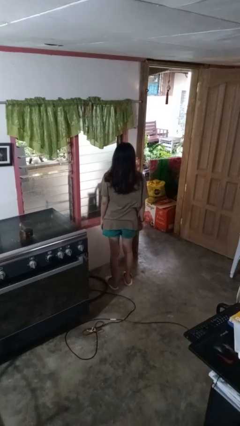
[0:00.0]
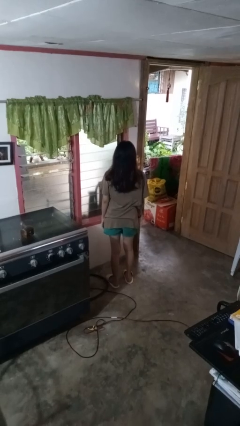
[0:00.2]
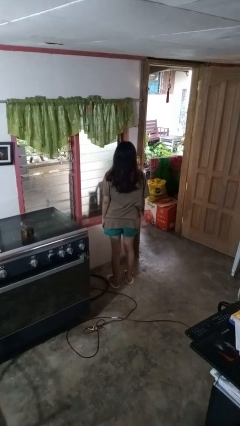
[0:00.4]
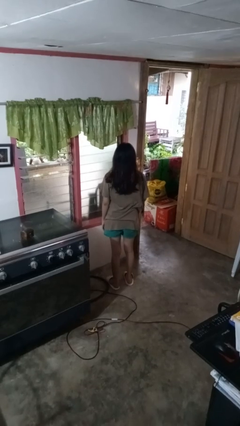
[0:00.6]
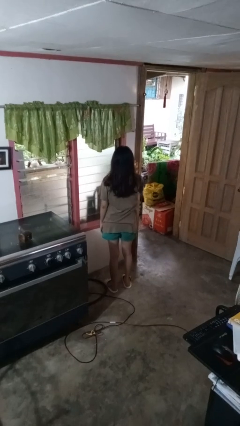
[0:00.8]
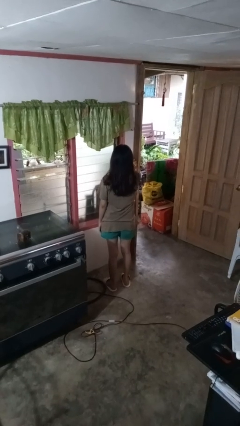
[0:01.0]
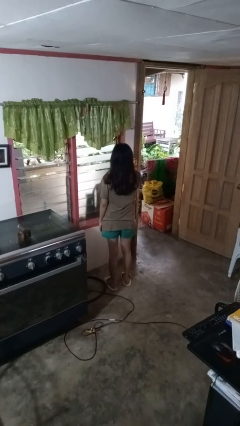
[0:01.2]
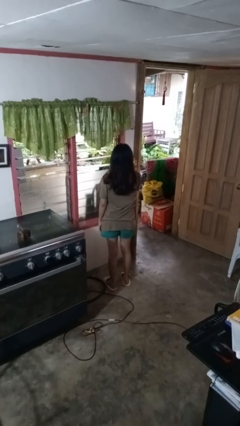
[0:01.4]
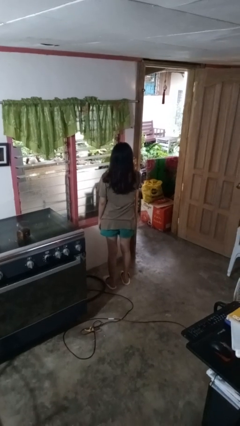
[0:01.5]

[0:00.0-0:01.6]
person opens home window

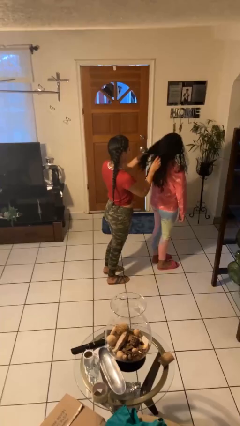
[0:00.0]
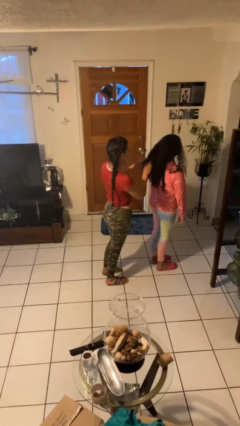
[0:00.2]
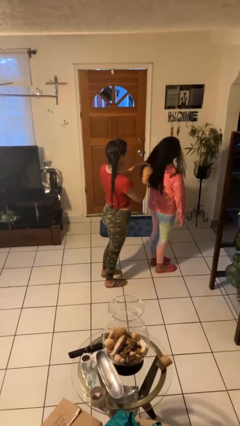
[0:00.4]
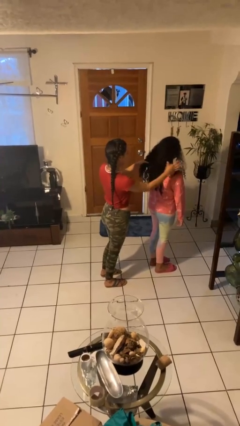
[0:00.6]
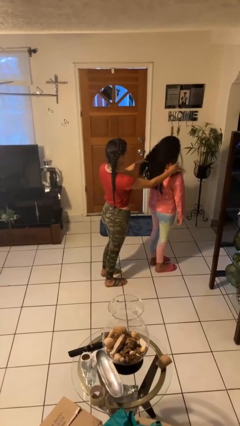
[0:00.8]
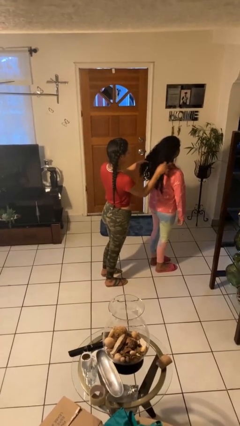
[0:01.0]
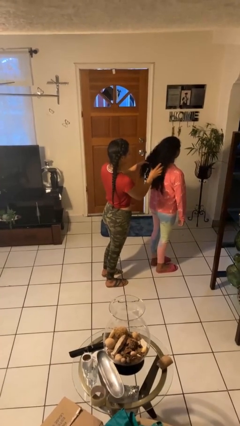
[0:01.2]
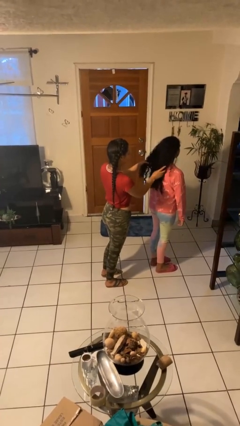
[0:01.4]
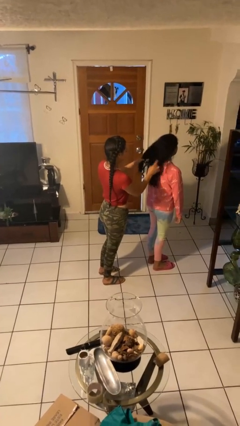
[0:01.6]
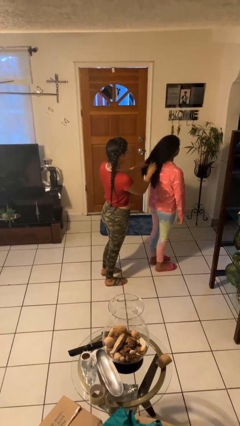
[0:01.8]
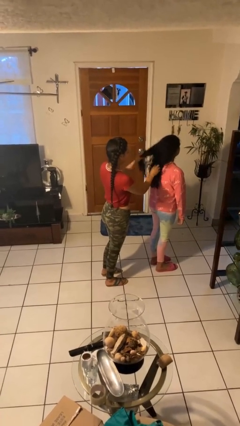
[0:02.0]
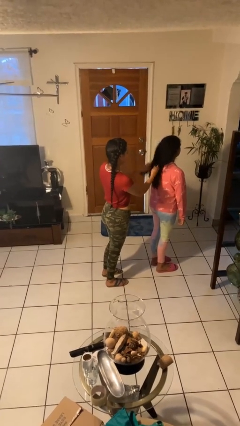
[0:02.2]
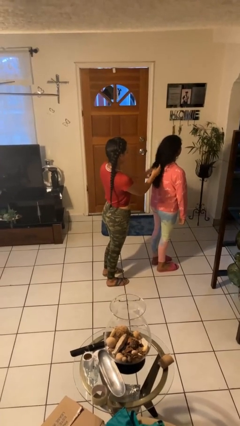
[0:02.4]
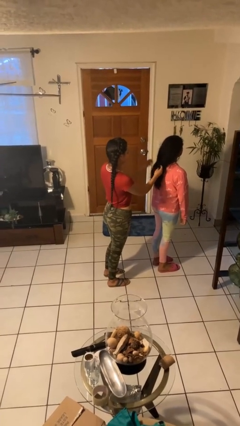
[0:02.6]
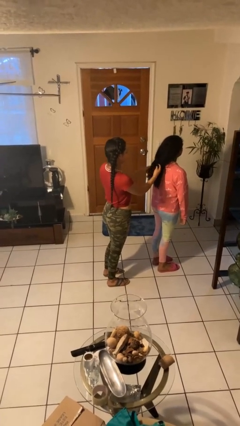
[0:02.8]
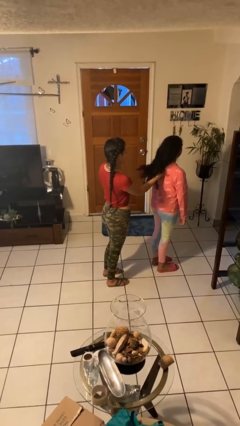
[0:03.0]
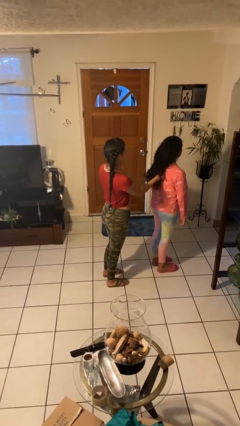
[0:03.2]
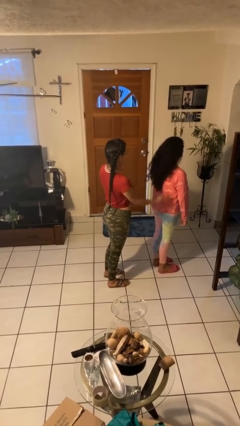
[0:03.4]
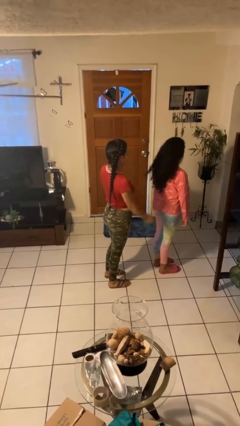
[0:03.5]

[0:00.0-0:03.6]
person braids hair of person

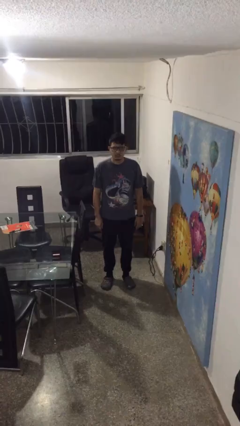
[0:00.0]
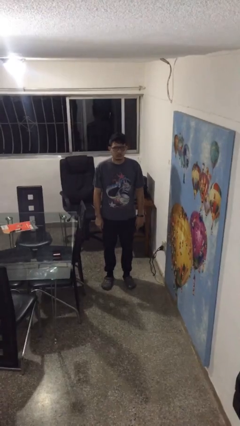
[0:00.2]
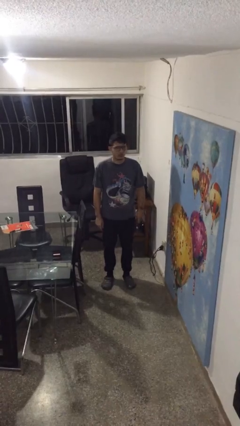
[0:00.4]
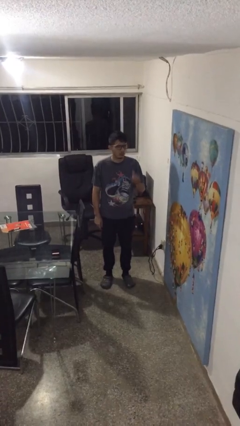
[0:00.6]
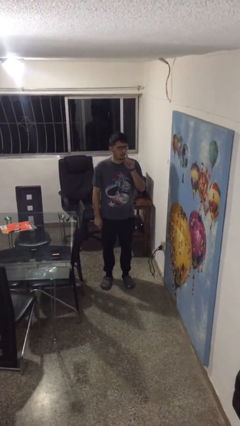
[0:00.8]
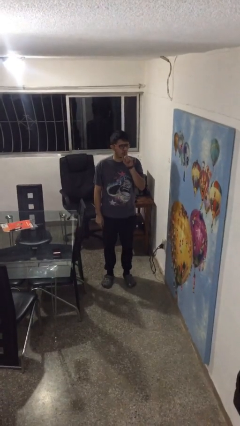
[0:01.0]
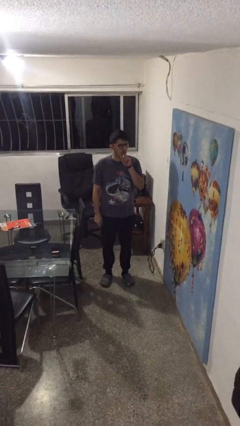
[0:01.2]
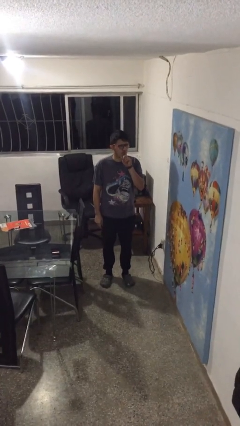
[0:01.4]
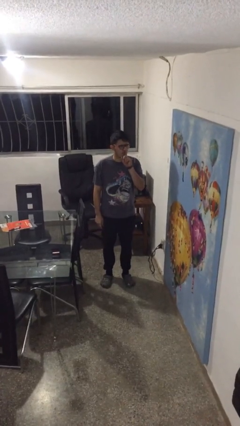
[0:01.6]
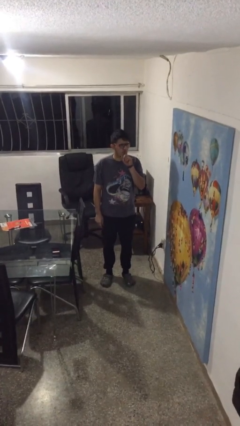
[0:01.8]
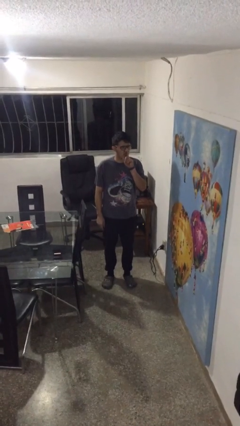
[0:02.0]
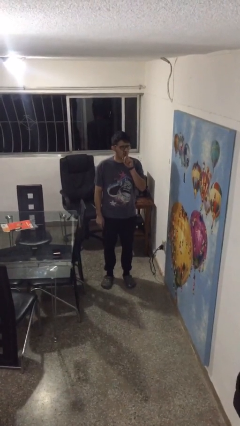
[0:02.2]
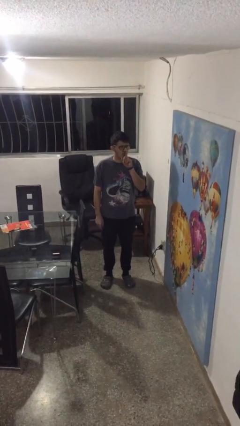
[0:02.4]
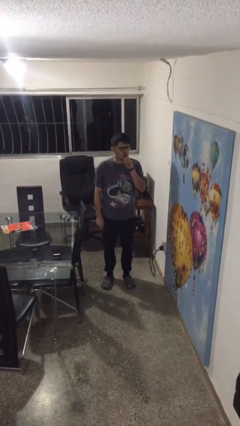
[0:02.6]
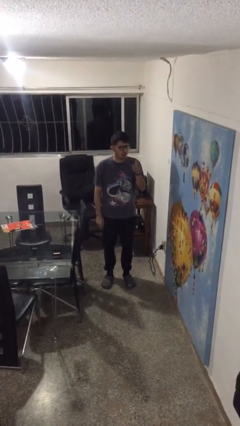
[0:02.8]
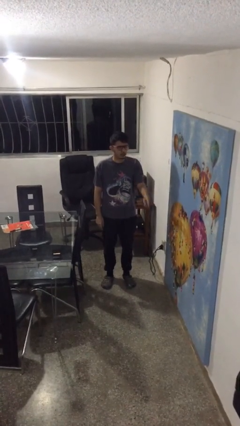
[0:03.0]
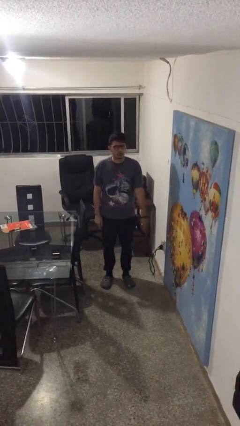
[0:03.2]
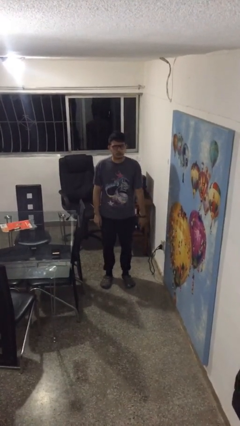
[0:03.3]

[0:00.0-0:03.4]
person gestures be quiet

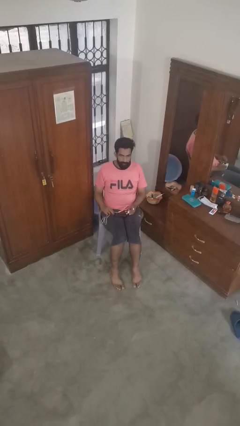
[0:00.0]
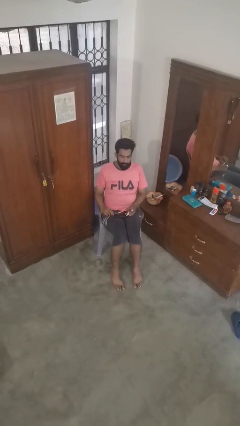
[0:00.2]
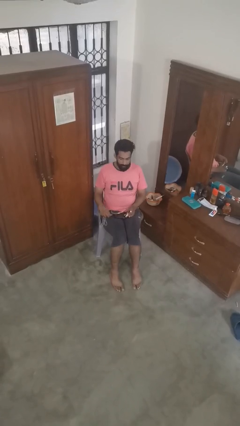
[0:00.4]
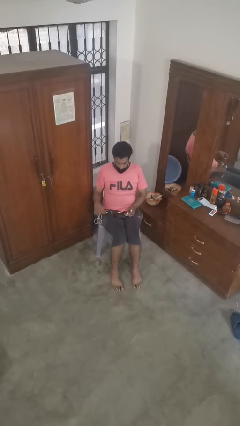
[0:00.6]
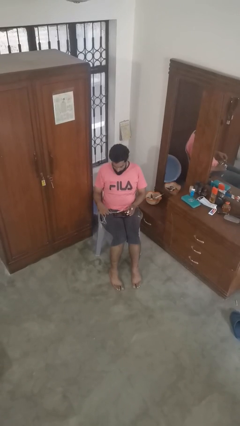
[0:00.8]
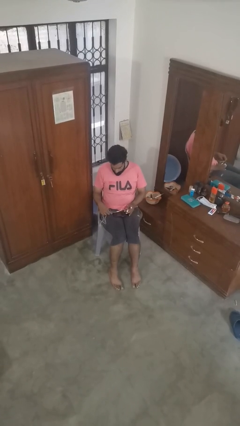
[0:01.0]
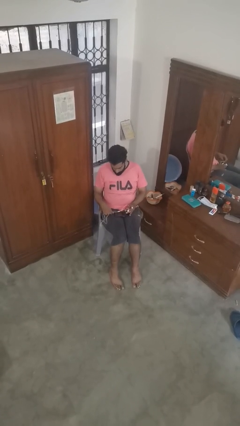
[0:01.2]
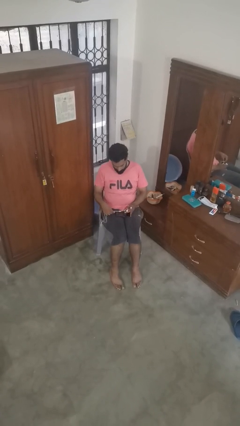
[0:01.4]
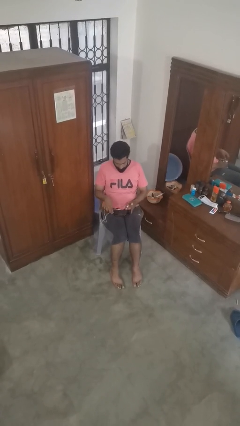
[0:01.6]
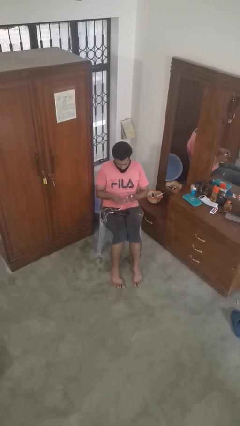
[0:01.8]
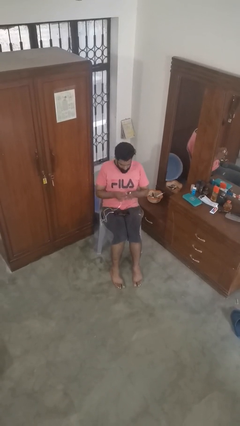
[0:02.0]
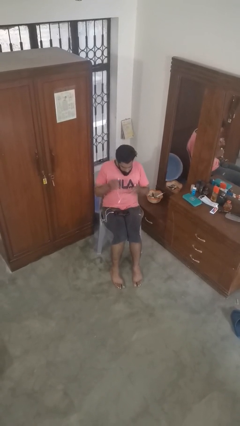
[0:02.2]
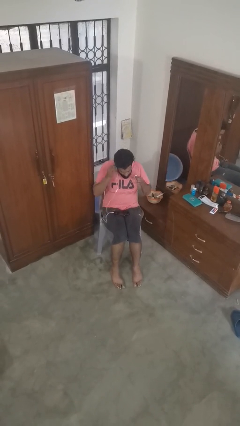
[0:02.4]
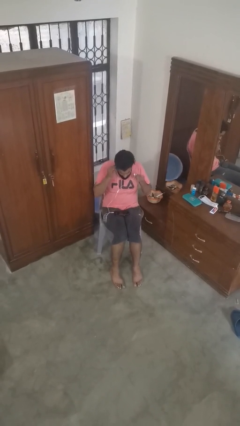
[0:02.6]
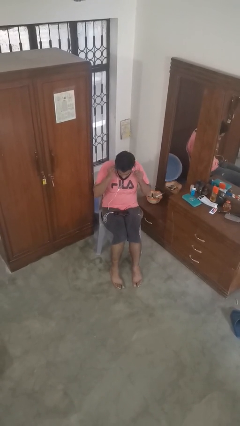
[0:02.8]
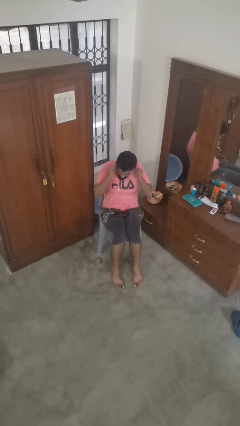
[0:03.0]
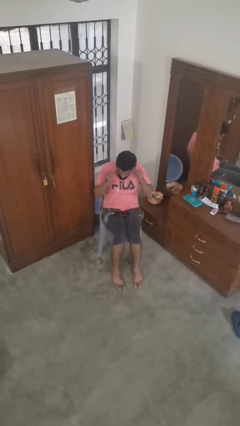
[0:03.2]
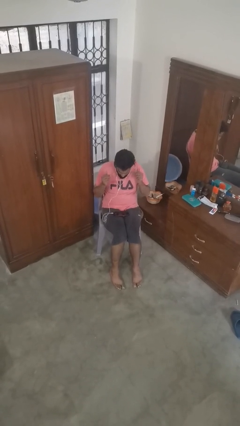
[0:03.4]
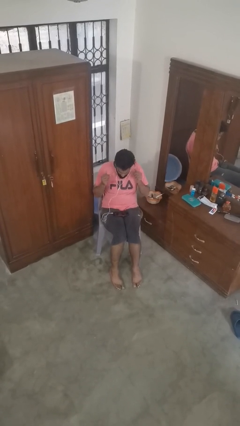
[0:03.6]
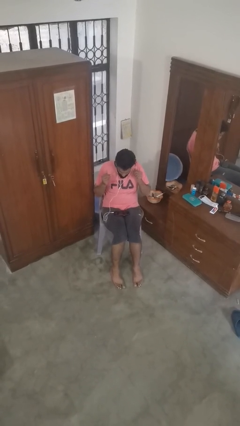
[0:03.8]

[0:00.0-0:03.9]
person puts on headphones

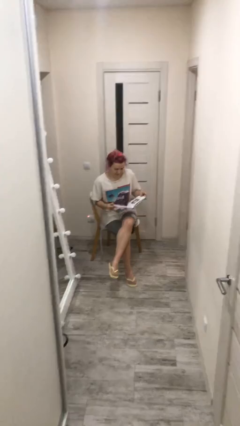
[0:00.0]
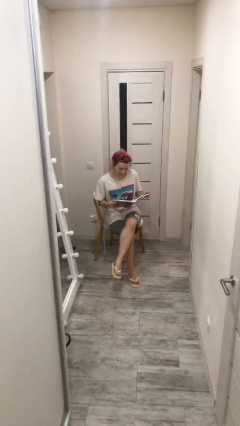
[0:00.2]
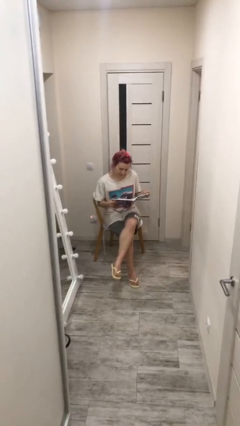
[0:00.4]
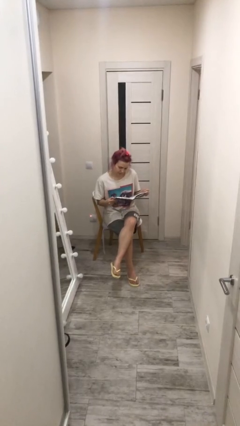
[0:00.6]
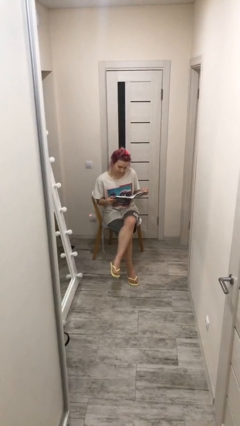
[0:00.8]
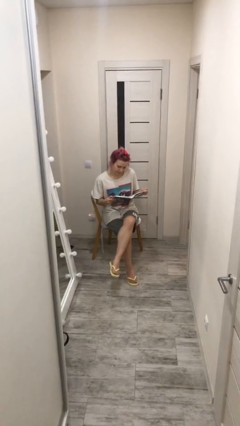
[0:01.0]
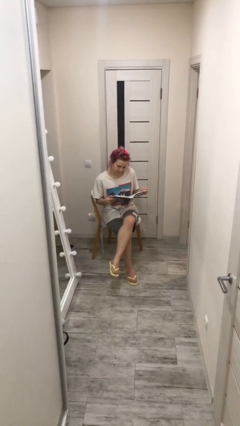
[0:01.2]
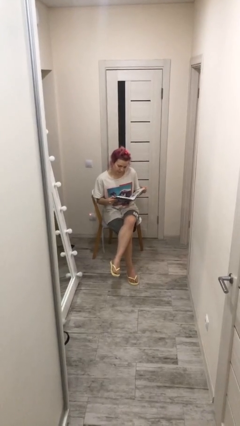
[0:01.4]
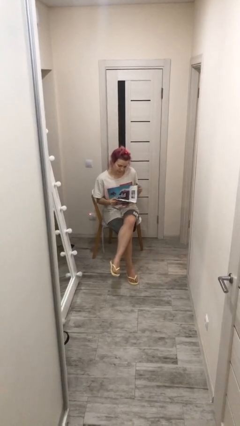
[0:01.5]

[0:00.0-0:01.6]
person reads document

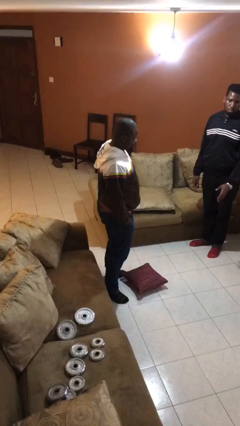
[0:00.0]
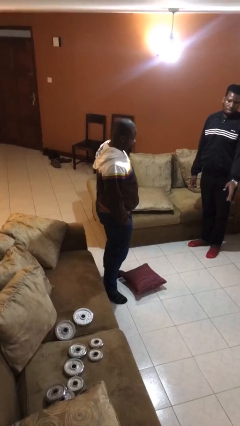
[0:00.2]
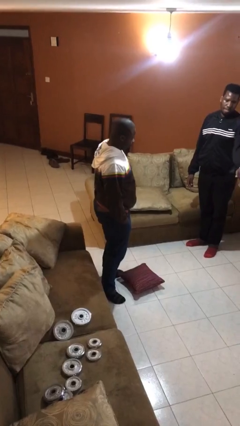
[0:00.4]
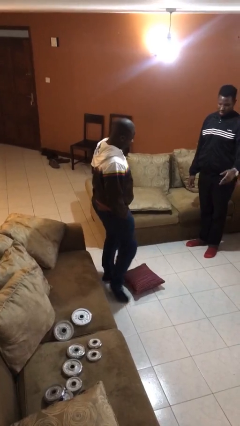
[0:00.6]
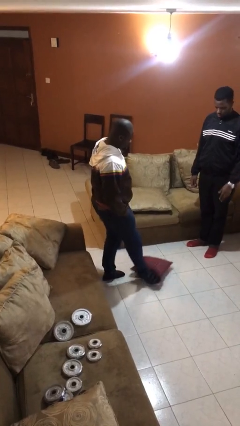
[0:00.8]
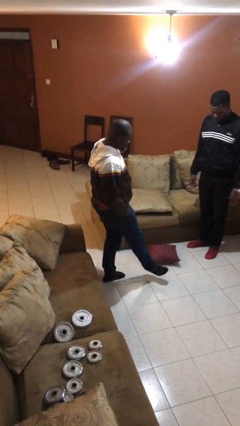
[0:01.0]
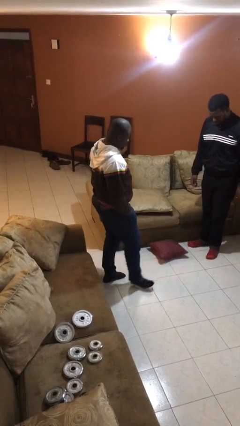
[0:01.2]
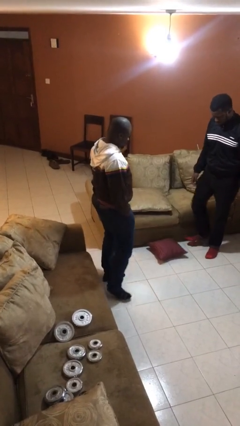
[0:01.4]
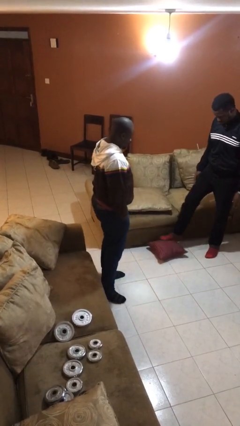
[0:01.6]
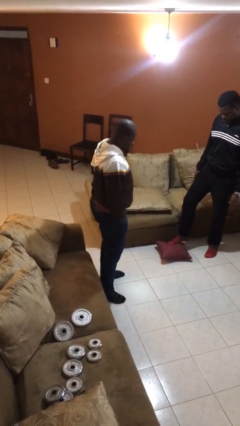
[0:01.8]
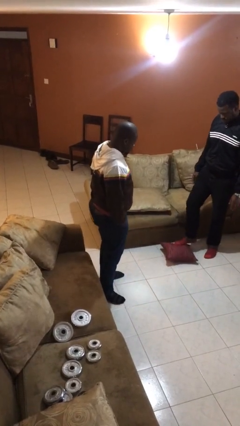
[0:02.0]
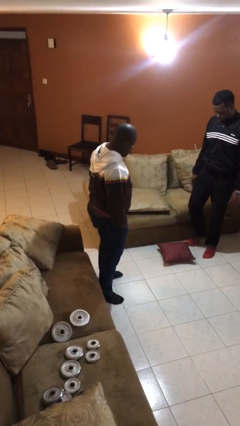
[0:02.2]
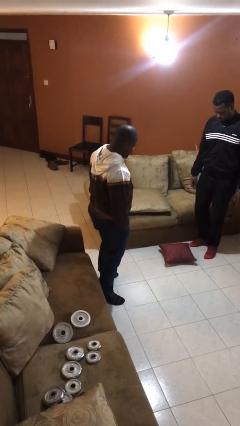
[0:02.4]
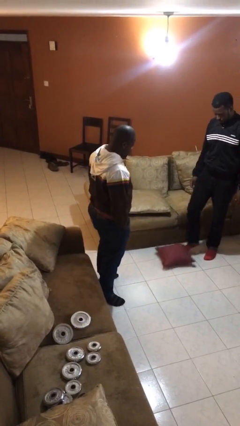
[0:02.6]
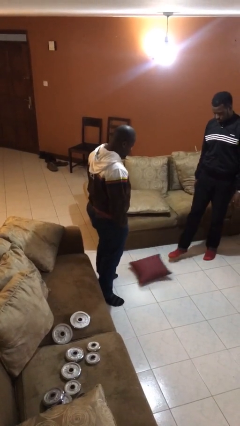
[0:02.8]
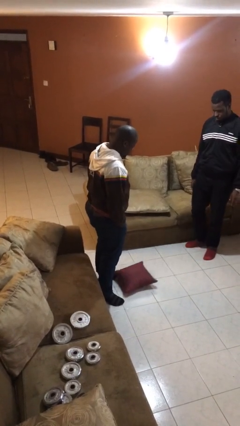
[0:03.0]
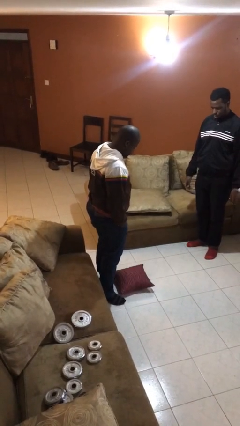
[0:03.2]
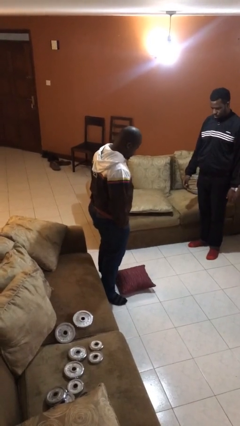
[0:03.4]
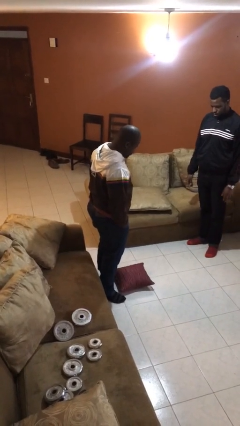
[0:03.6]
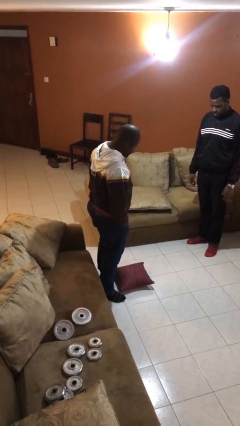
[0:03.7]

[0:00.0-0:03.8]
person kicks object to person
